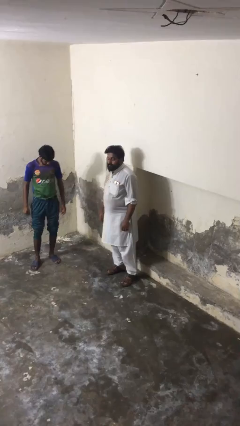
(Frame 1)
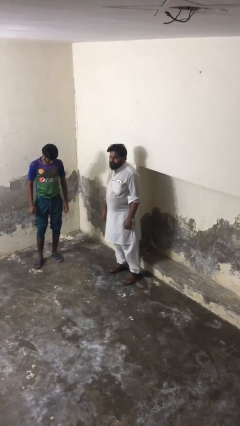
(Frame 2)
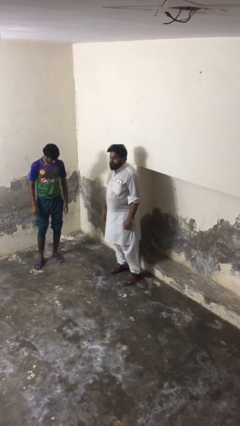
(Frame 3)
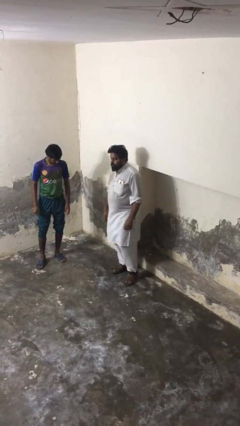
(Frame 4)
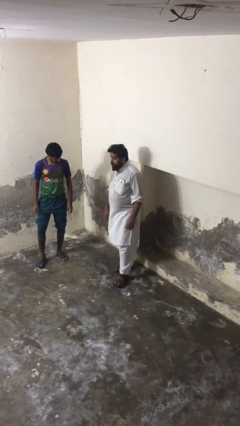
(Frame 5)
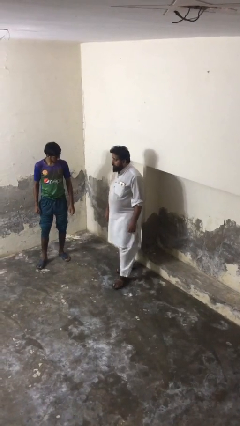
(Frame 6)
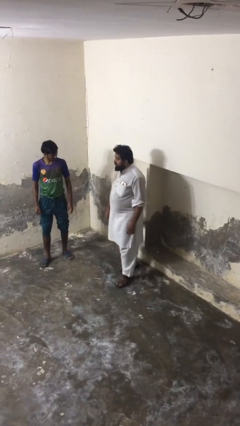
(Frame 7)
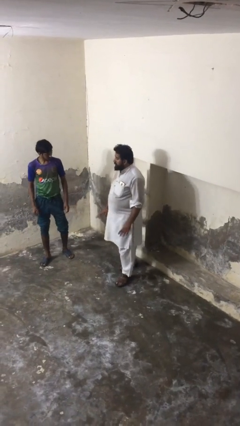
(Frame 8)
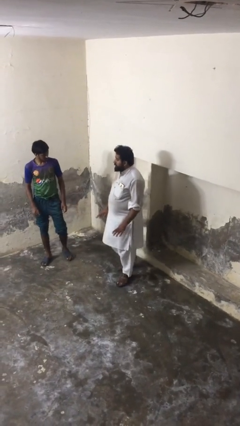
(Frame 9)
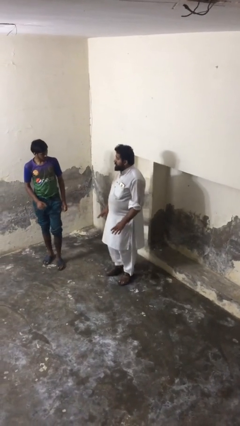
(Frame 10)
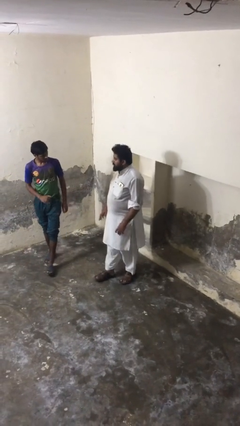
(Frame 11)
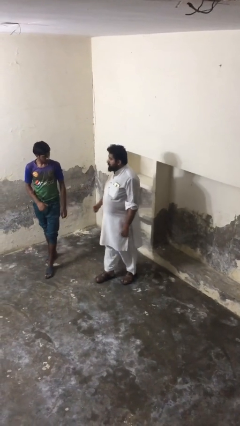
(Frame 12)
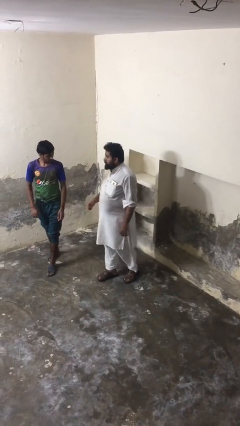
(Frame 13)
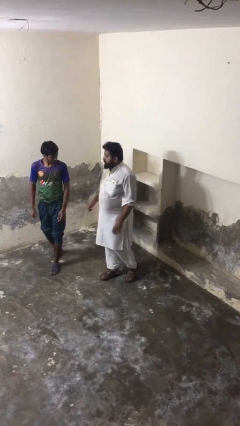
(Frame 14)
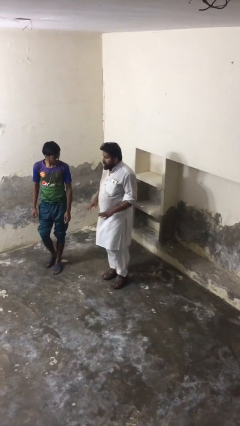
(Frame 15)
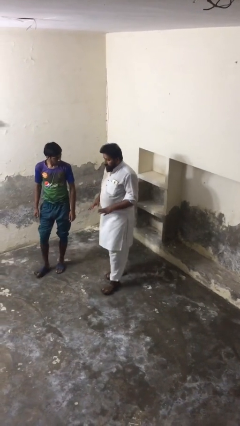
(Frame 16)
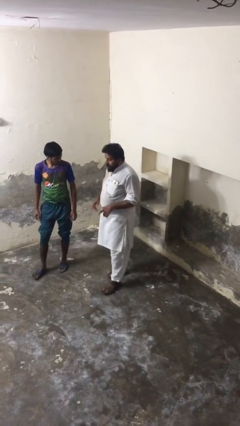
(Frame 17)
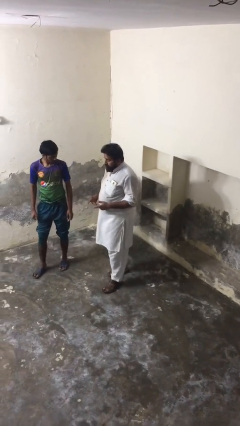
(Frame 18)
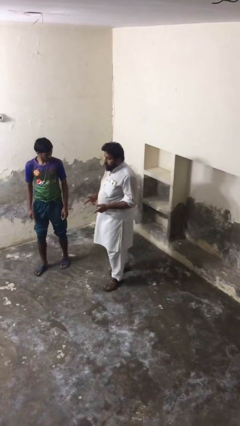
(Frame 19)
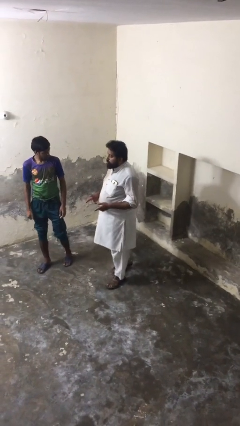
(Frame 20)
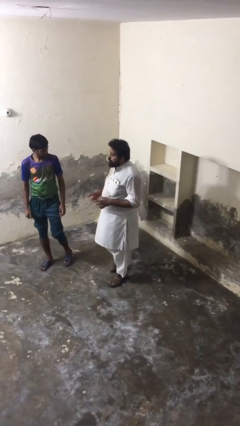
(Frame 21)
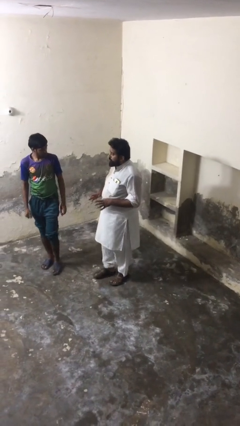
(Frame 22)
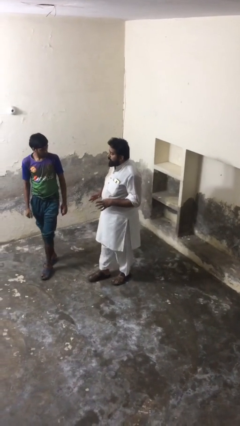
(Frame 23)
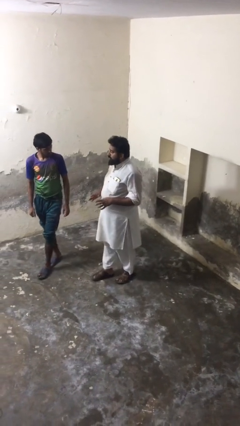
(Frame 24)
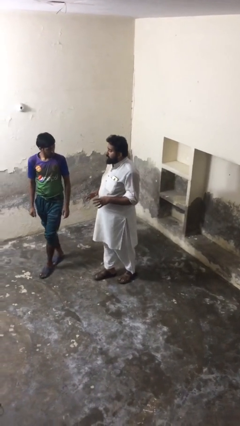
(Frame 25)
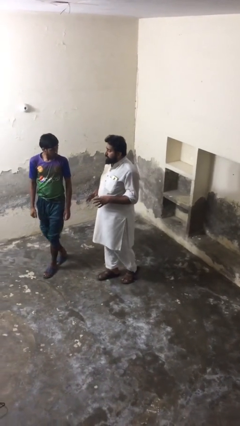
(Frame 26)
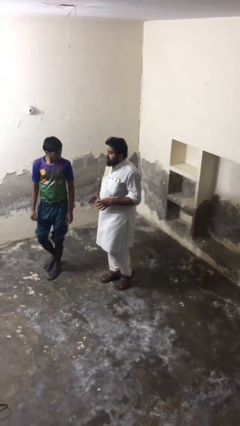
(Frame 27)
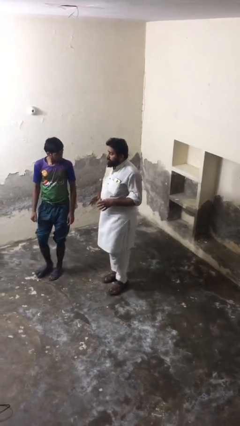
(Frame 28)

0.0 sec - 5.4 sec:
person talks to person

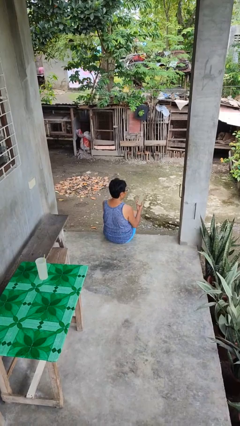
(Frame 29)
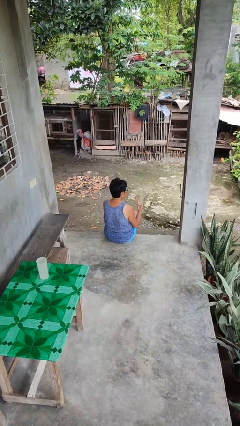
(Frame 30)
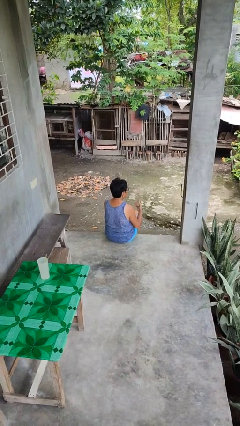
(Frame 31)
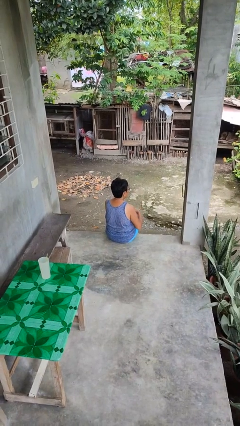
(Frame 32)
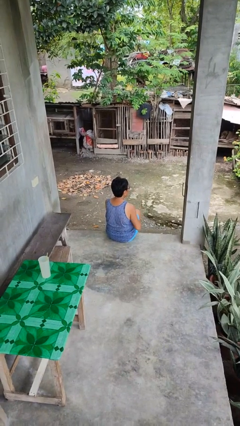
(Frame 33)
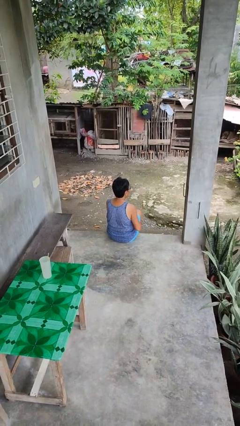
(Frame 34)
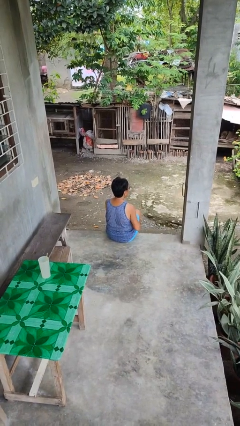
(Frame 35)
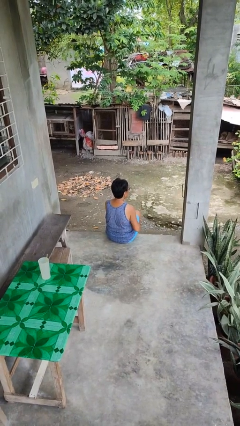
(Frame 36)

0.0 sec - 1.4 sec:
person puts phone into pocket

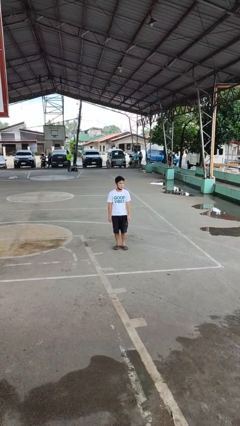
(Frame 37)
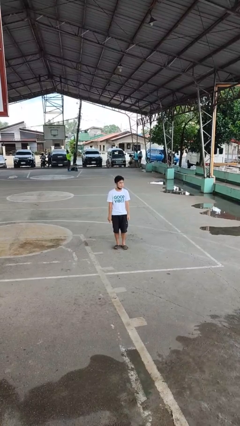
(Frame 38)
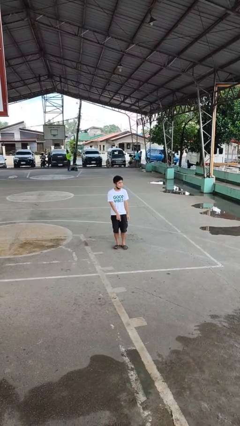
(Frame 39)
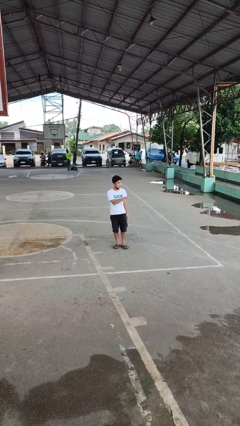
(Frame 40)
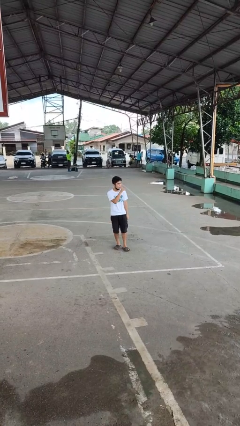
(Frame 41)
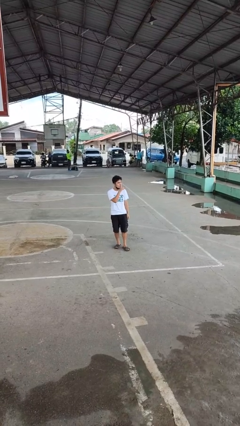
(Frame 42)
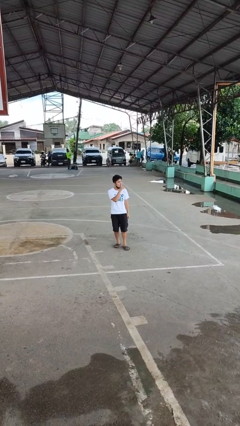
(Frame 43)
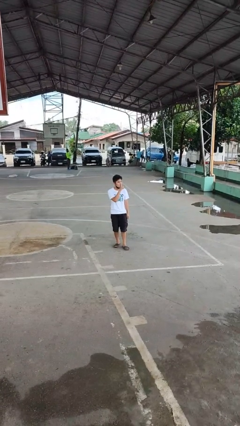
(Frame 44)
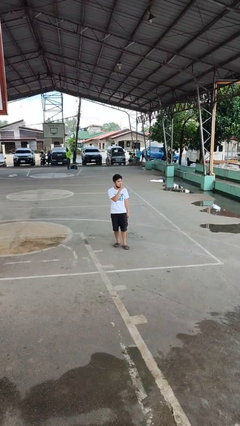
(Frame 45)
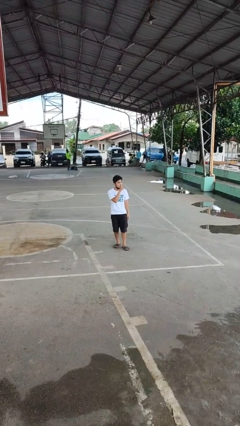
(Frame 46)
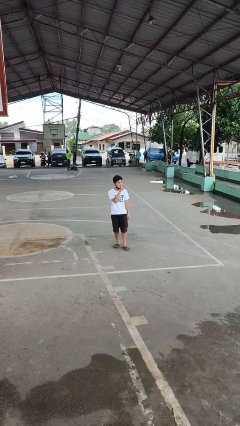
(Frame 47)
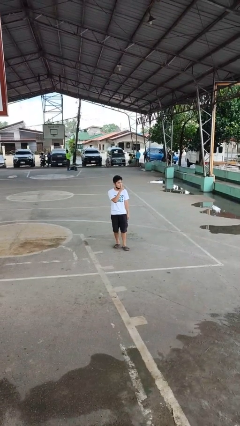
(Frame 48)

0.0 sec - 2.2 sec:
person gestures be quiet

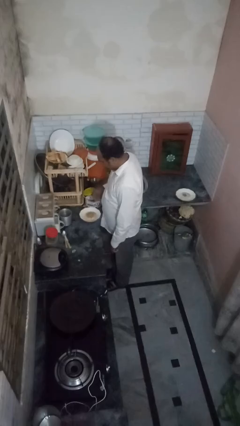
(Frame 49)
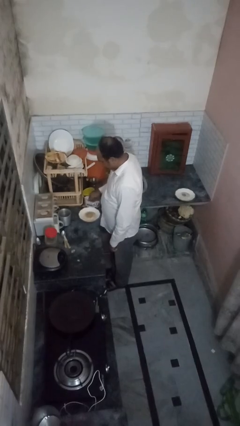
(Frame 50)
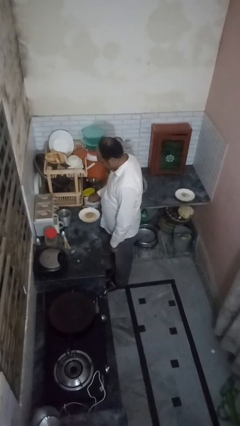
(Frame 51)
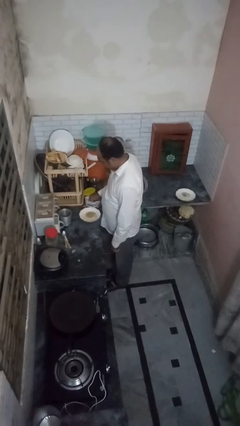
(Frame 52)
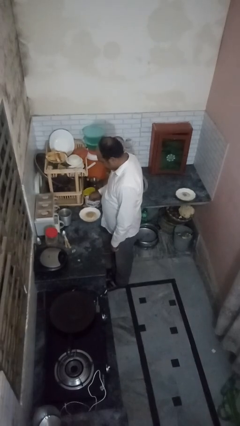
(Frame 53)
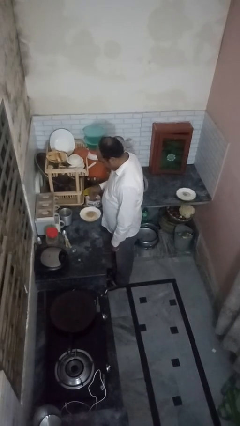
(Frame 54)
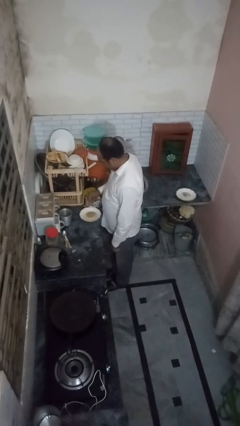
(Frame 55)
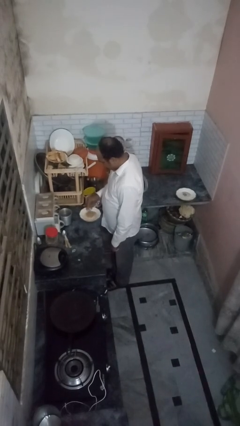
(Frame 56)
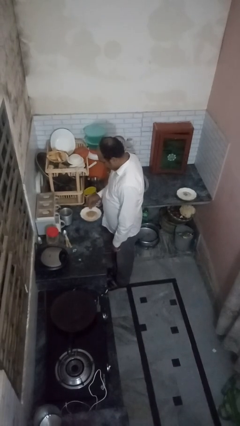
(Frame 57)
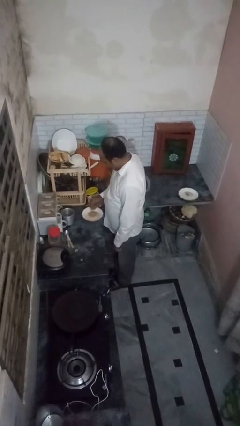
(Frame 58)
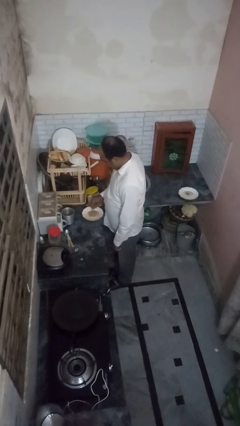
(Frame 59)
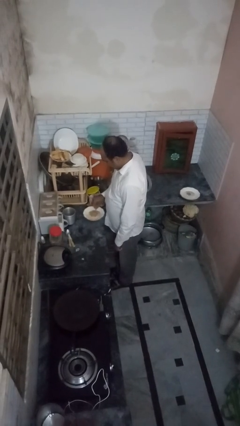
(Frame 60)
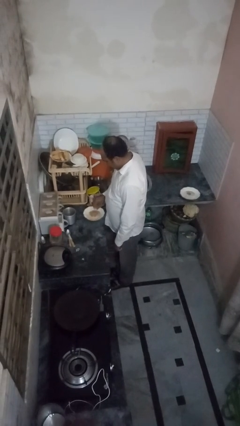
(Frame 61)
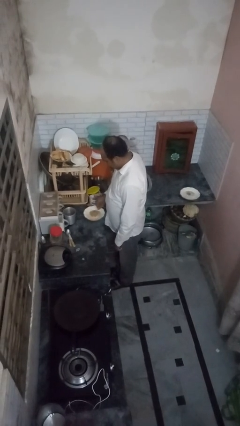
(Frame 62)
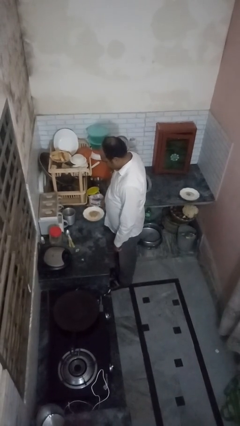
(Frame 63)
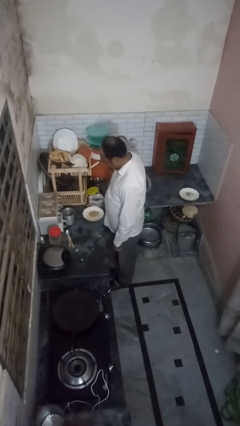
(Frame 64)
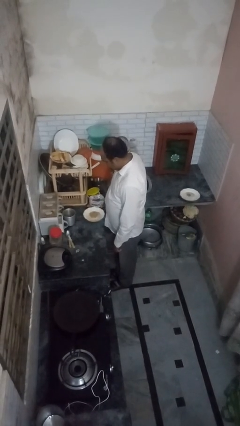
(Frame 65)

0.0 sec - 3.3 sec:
person pours into bowl

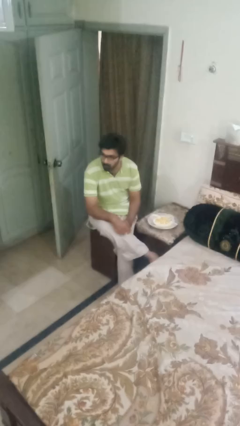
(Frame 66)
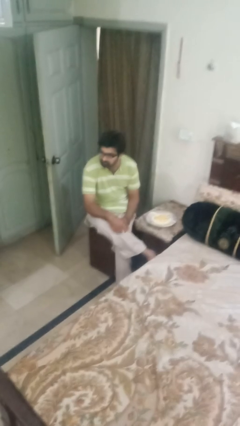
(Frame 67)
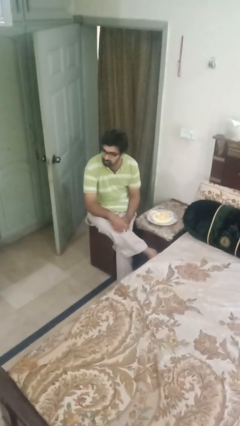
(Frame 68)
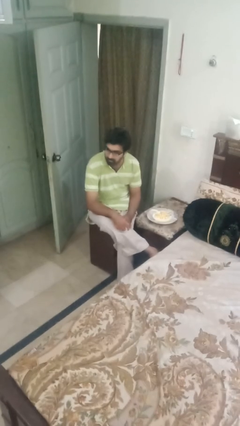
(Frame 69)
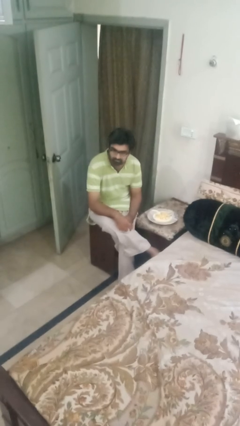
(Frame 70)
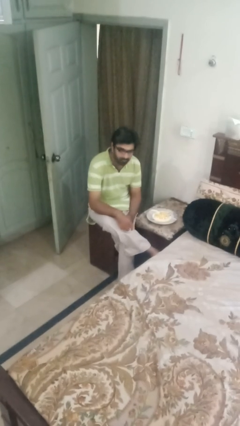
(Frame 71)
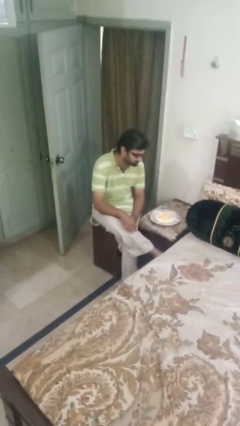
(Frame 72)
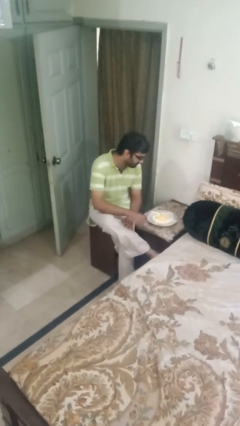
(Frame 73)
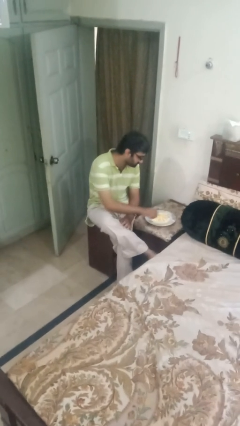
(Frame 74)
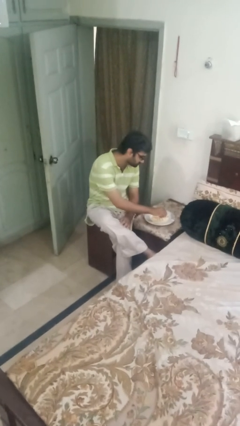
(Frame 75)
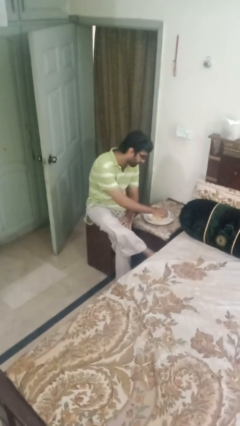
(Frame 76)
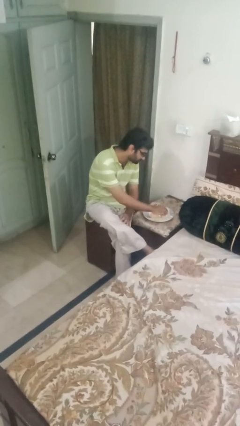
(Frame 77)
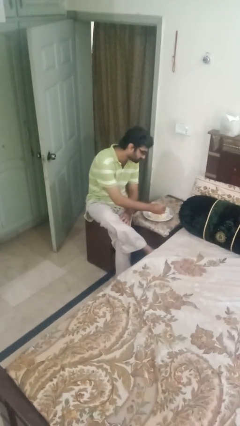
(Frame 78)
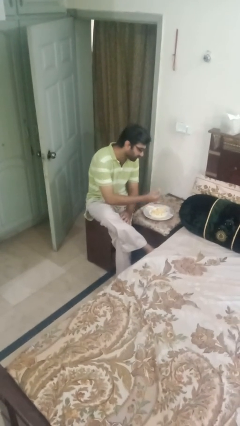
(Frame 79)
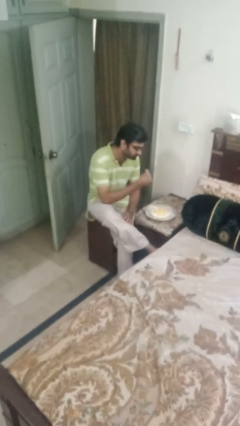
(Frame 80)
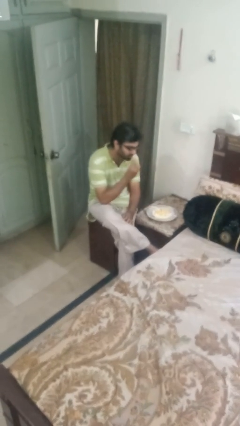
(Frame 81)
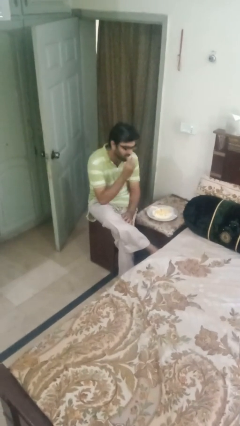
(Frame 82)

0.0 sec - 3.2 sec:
person eats with hands

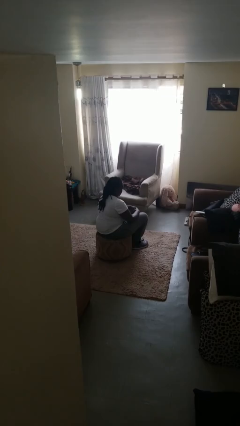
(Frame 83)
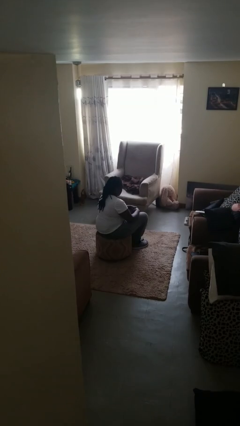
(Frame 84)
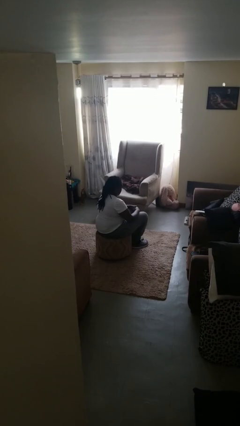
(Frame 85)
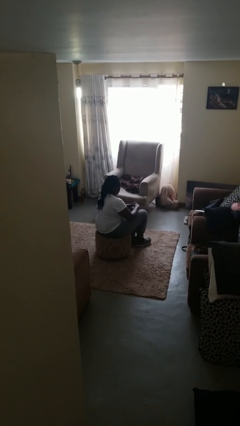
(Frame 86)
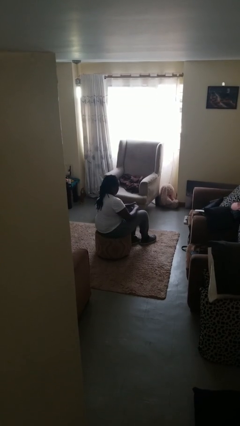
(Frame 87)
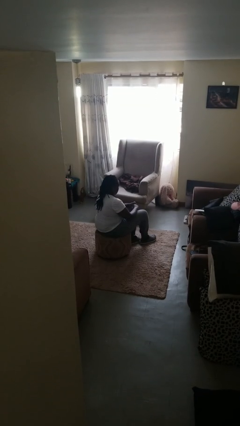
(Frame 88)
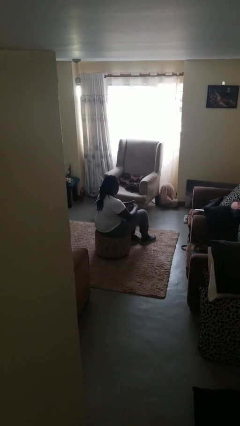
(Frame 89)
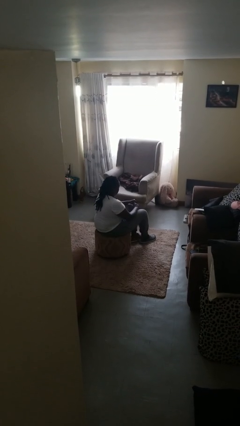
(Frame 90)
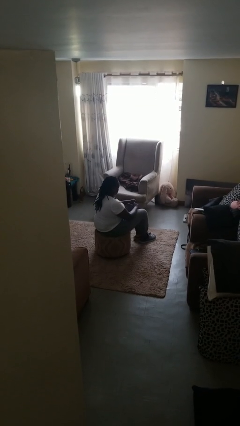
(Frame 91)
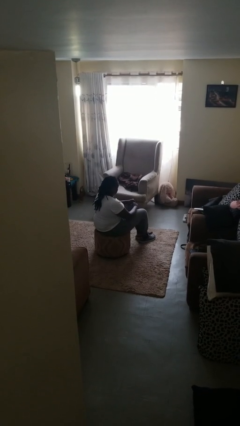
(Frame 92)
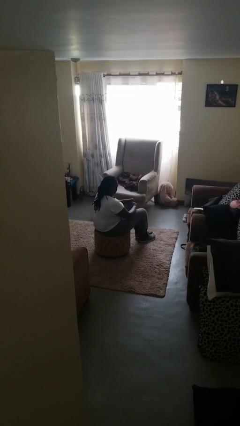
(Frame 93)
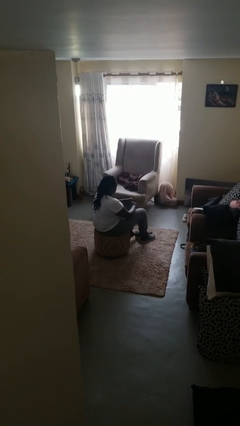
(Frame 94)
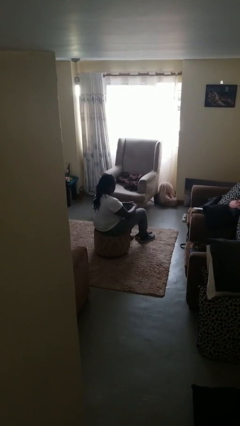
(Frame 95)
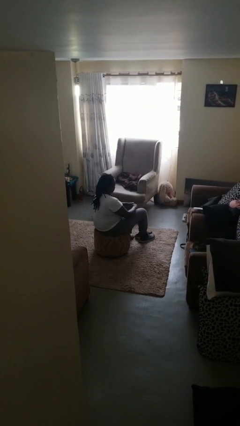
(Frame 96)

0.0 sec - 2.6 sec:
person takes off shoes
